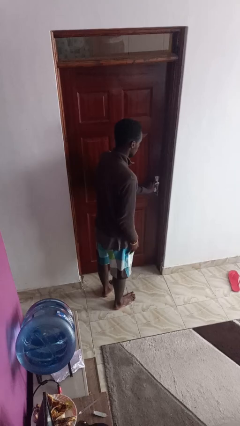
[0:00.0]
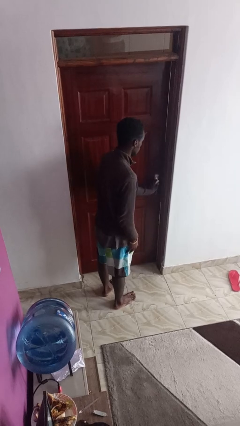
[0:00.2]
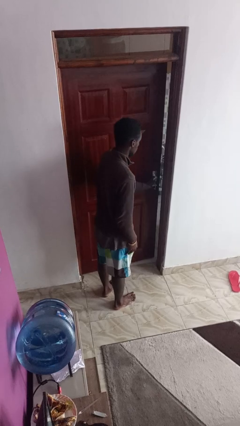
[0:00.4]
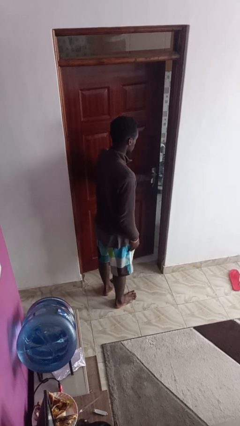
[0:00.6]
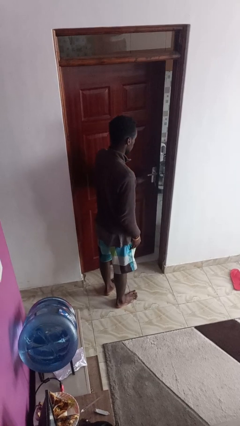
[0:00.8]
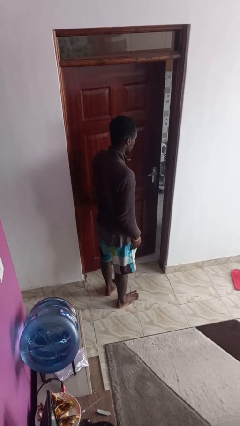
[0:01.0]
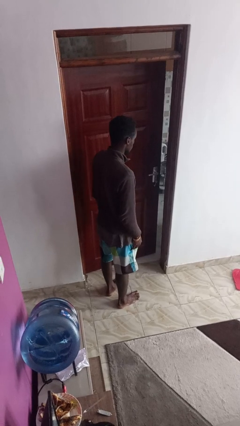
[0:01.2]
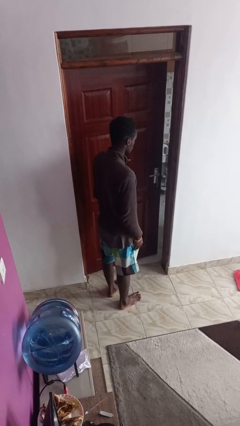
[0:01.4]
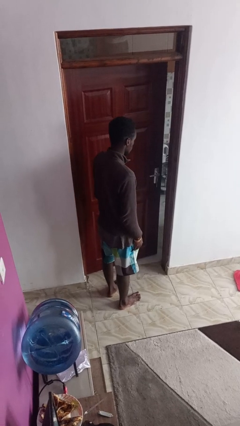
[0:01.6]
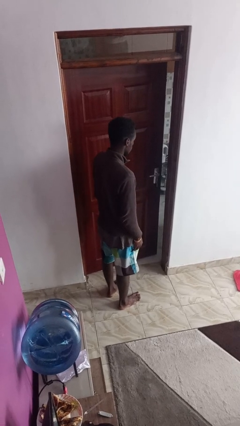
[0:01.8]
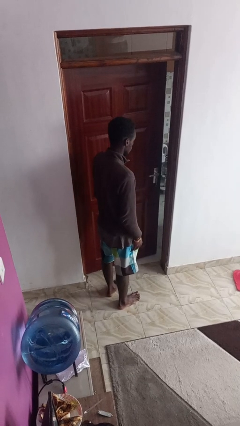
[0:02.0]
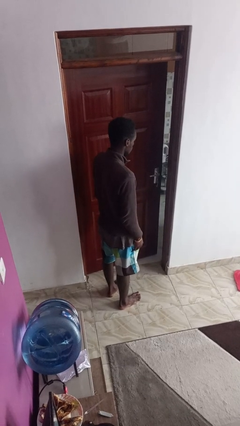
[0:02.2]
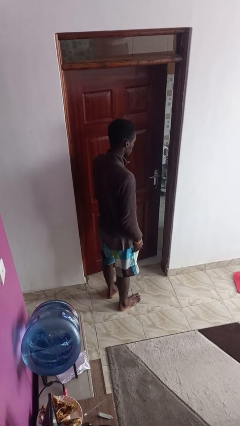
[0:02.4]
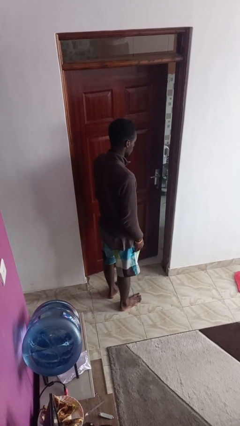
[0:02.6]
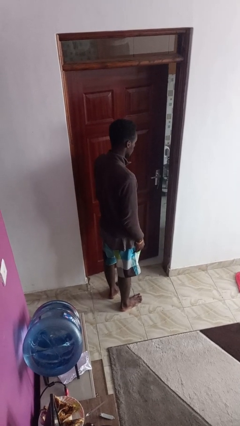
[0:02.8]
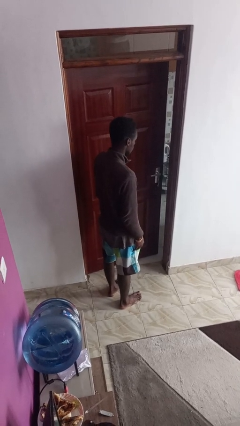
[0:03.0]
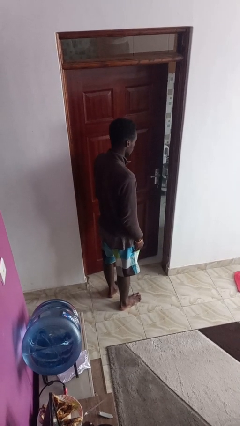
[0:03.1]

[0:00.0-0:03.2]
person opens facility door

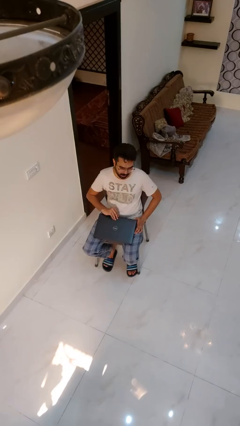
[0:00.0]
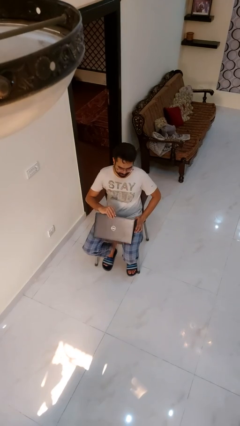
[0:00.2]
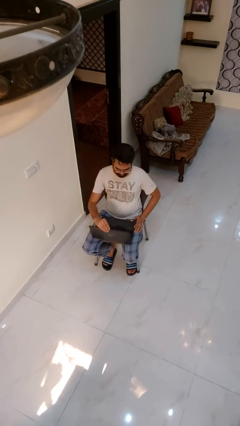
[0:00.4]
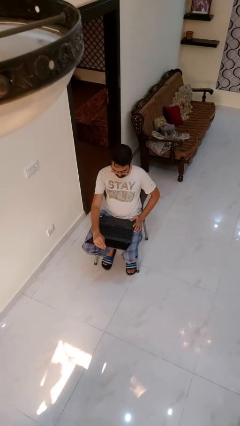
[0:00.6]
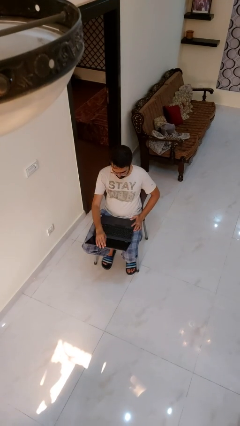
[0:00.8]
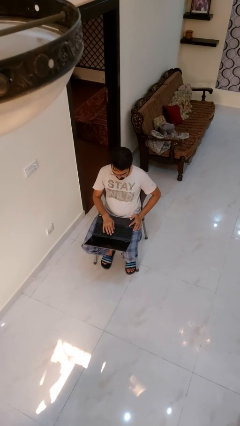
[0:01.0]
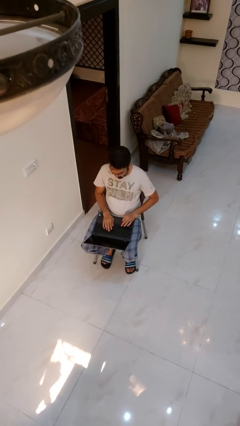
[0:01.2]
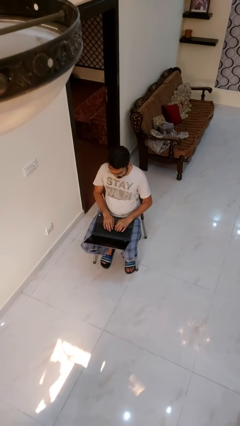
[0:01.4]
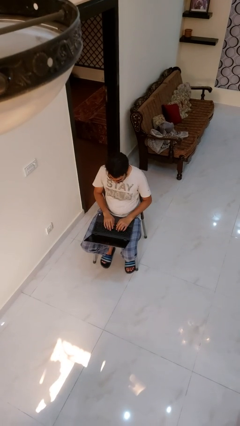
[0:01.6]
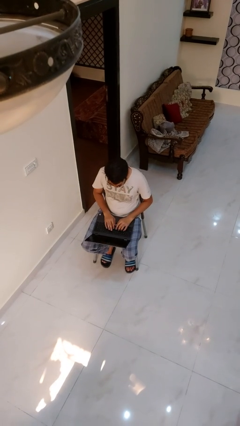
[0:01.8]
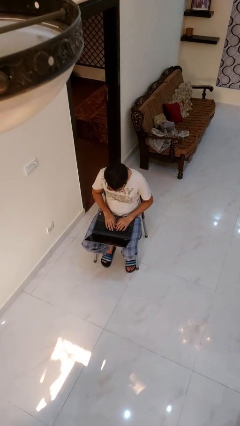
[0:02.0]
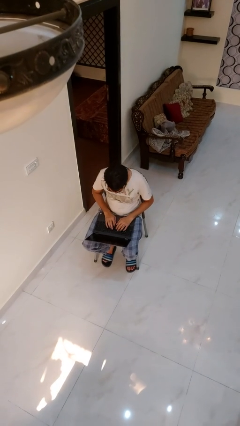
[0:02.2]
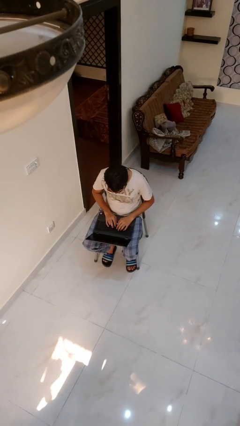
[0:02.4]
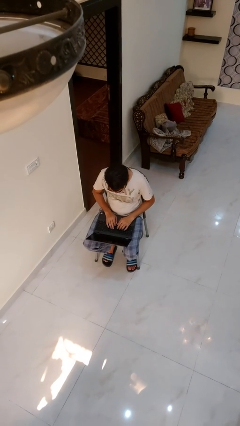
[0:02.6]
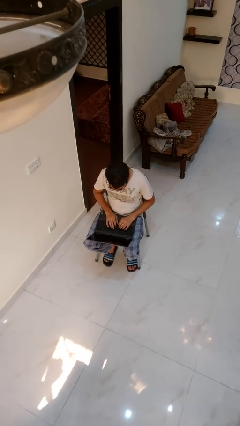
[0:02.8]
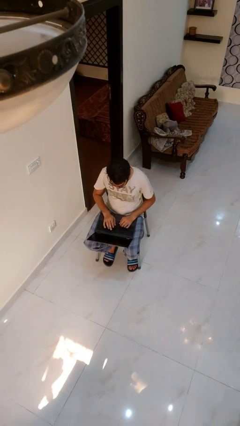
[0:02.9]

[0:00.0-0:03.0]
person opens laptop

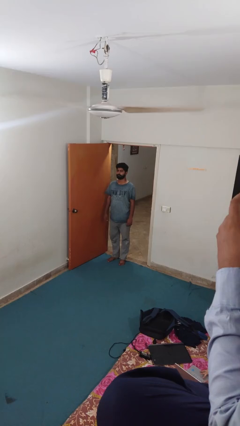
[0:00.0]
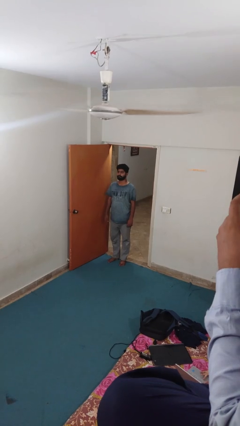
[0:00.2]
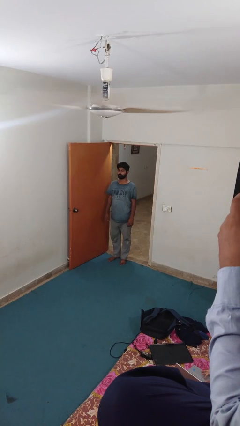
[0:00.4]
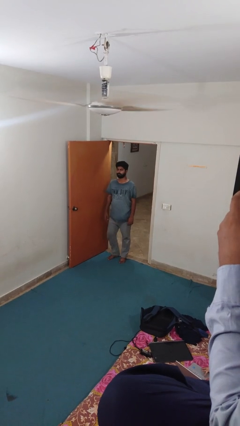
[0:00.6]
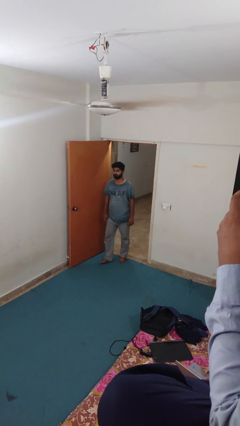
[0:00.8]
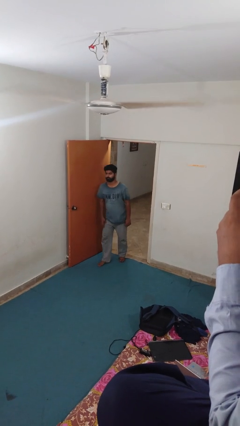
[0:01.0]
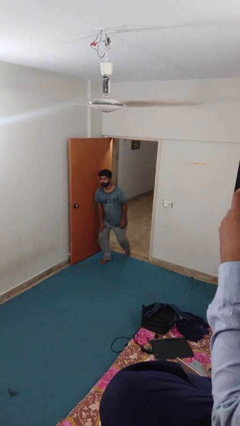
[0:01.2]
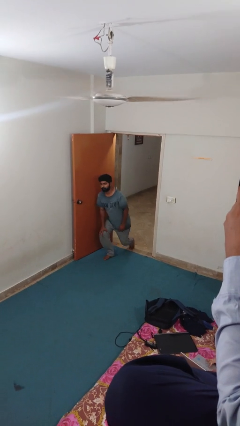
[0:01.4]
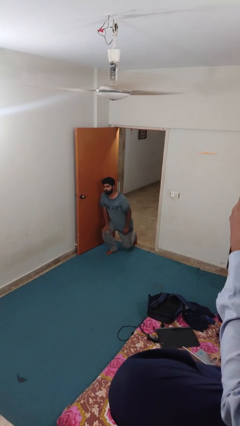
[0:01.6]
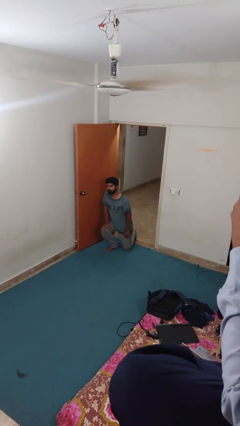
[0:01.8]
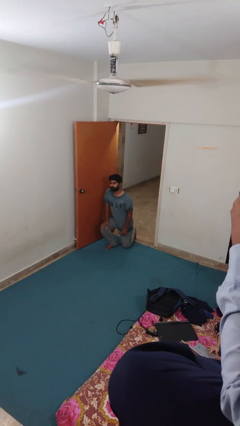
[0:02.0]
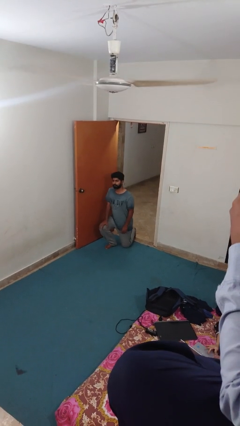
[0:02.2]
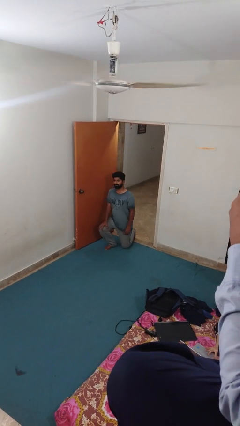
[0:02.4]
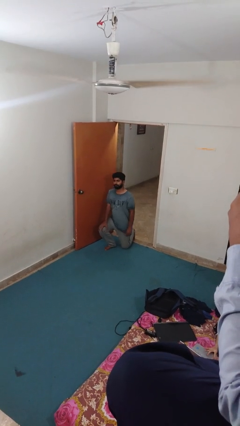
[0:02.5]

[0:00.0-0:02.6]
person kneels

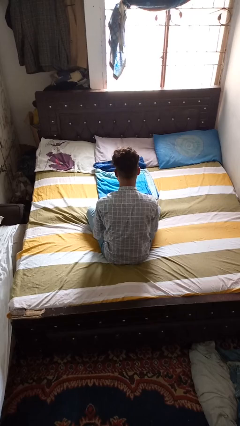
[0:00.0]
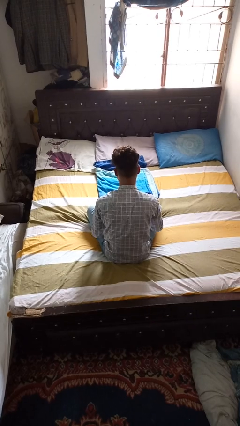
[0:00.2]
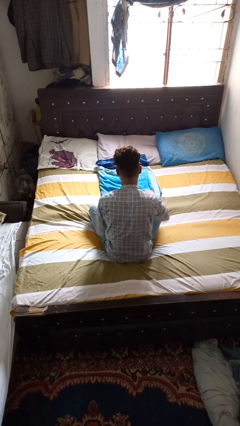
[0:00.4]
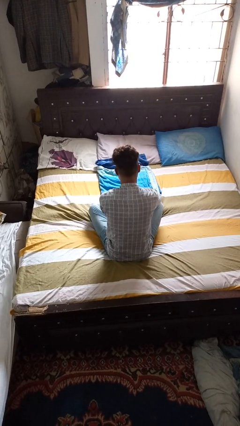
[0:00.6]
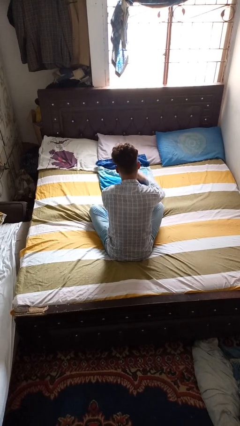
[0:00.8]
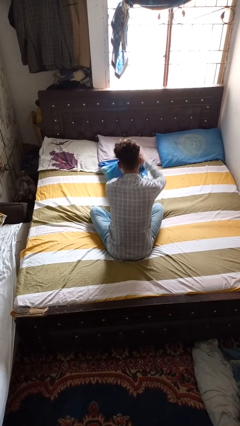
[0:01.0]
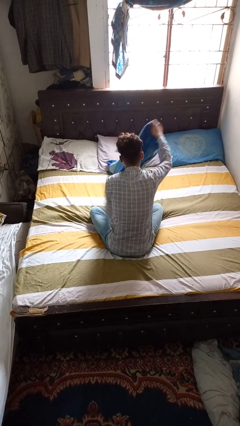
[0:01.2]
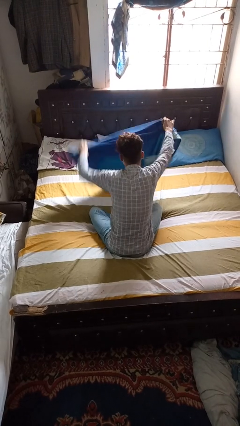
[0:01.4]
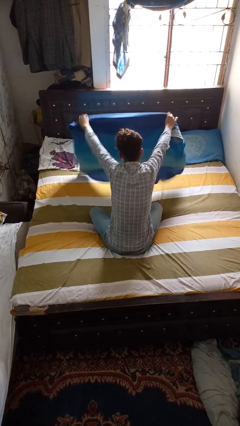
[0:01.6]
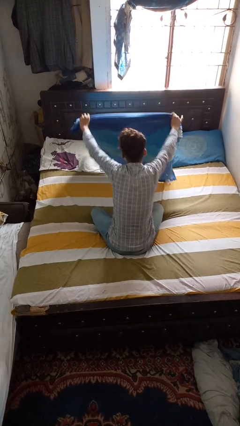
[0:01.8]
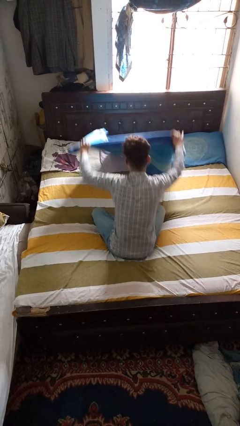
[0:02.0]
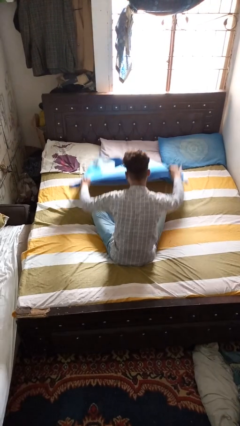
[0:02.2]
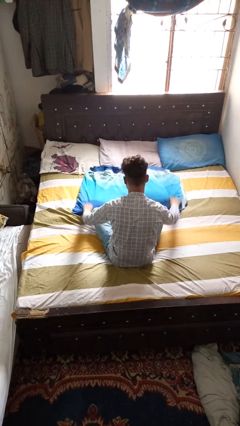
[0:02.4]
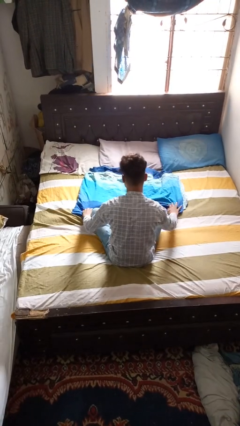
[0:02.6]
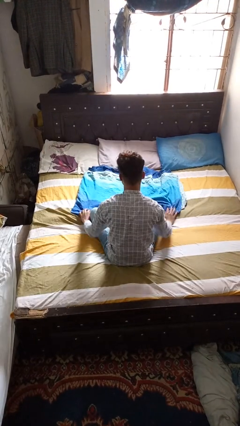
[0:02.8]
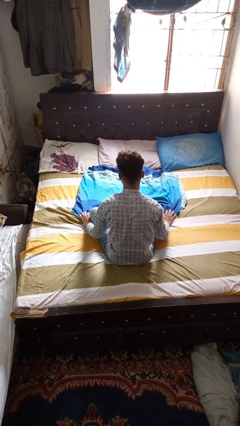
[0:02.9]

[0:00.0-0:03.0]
person unfolds blanket

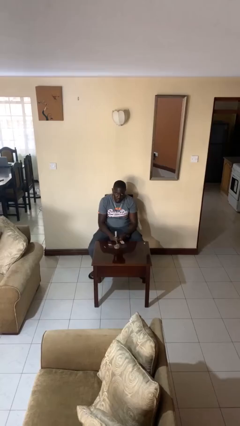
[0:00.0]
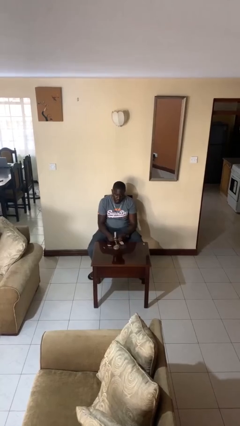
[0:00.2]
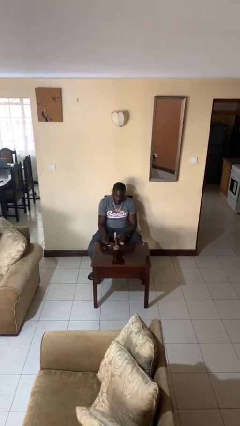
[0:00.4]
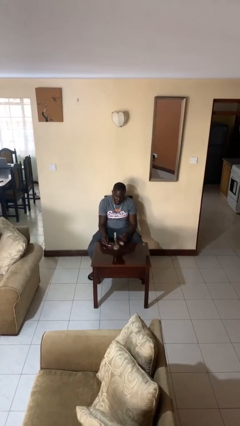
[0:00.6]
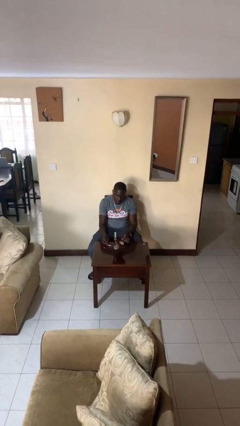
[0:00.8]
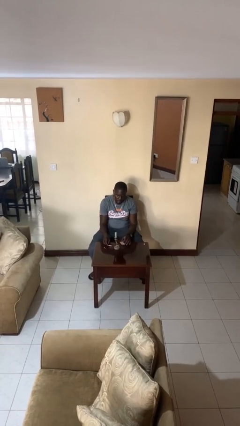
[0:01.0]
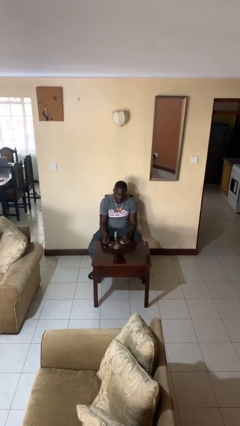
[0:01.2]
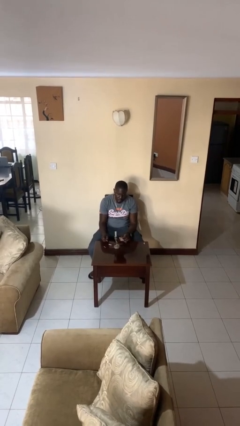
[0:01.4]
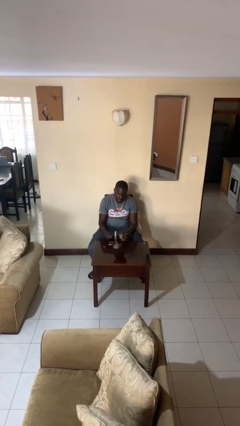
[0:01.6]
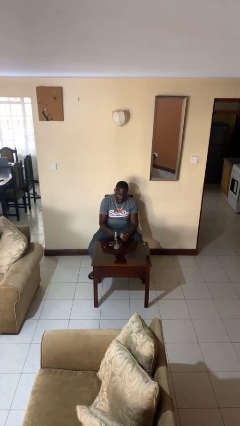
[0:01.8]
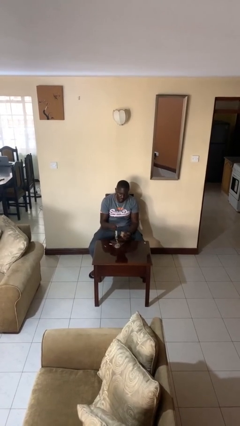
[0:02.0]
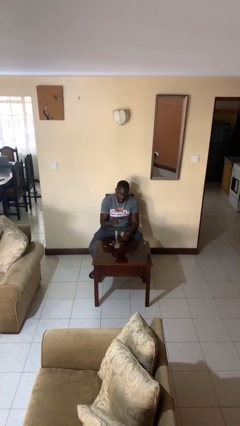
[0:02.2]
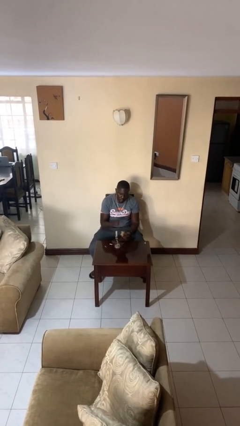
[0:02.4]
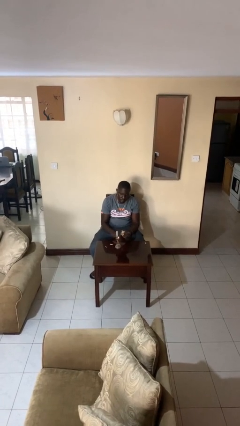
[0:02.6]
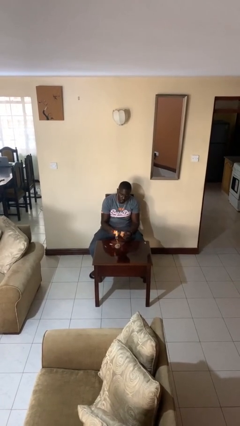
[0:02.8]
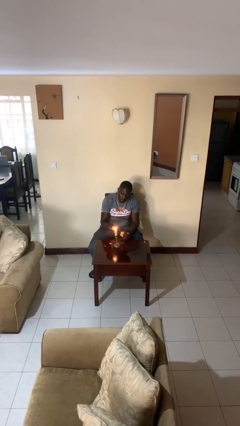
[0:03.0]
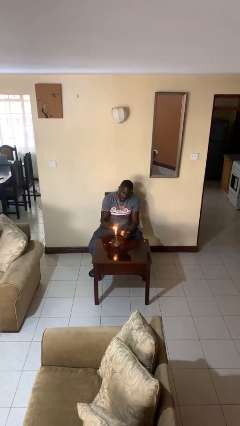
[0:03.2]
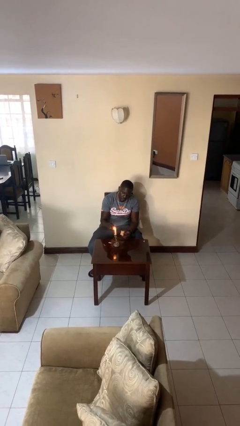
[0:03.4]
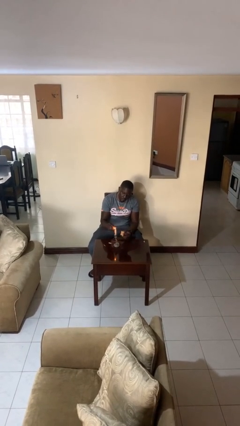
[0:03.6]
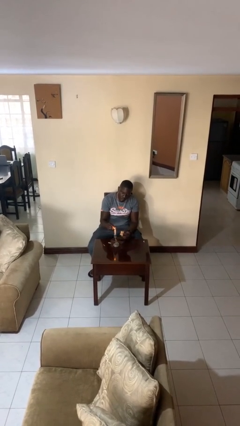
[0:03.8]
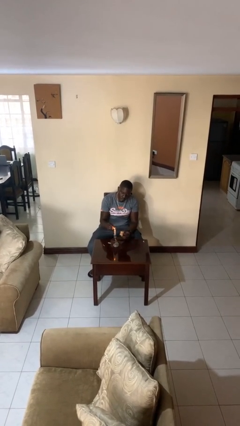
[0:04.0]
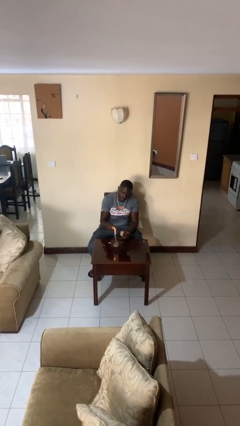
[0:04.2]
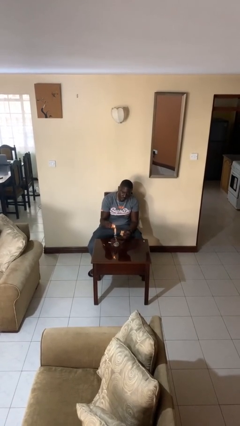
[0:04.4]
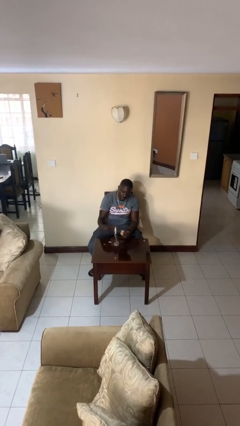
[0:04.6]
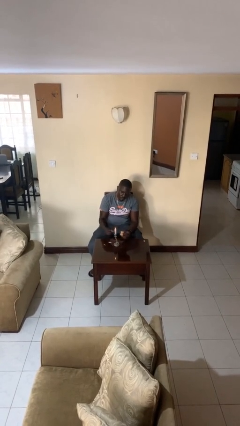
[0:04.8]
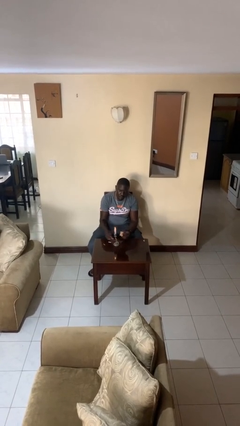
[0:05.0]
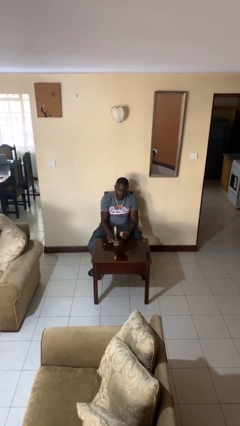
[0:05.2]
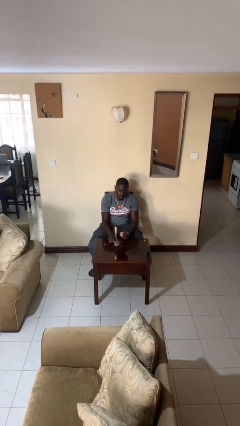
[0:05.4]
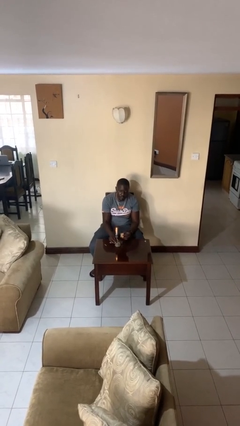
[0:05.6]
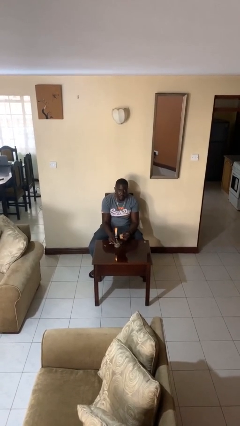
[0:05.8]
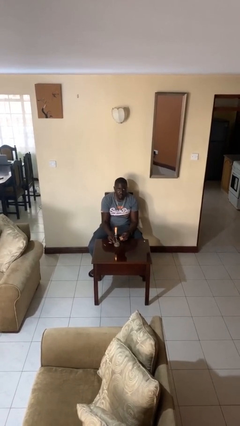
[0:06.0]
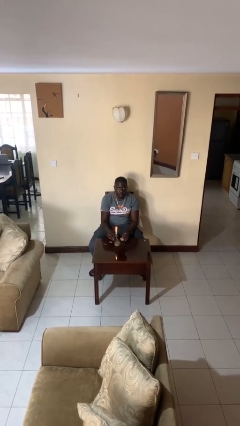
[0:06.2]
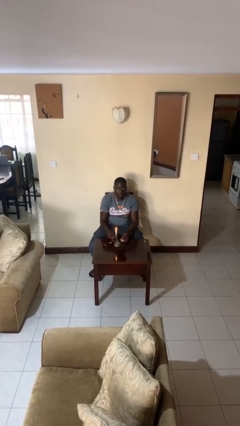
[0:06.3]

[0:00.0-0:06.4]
person lights candle
